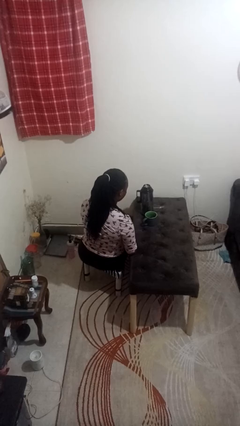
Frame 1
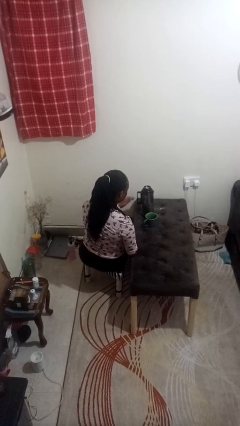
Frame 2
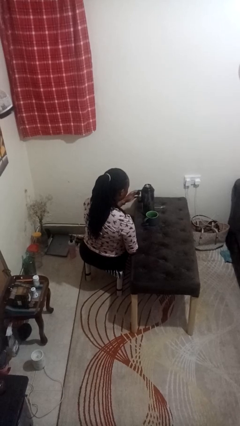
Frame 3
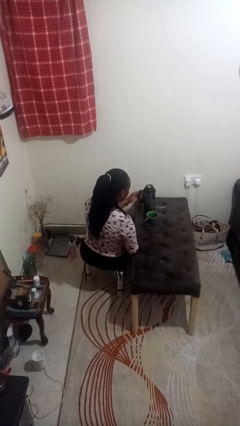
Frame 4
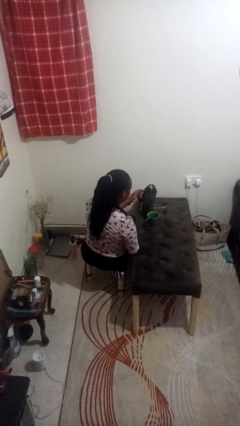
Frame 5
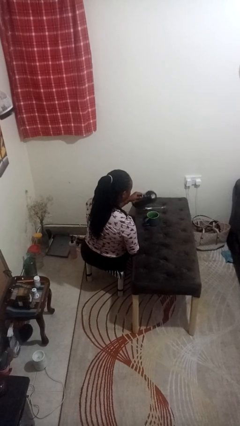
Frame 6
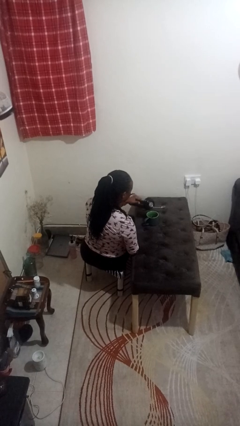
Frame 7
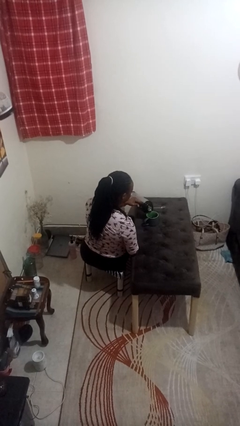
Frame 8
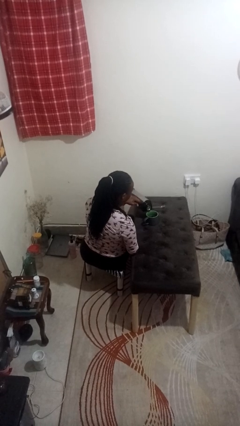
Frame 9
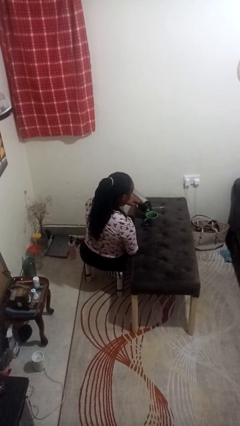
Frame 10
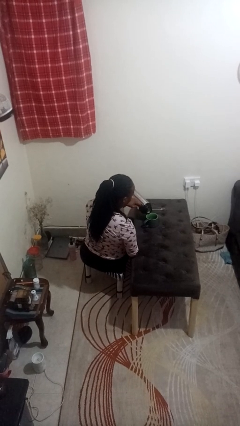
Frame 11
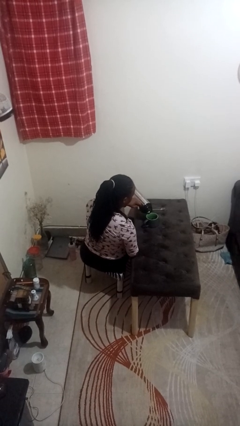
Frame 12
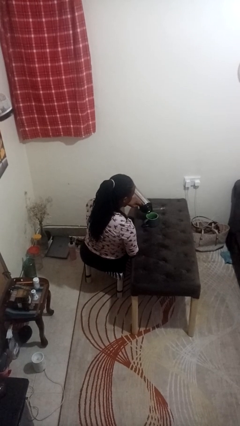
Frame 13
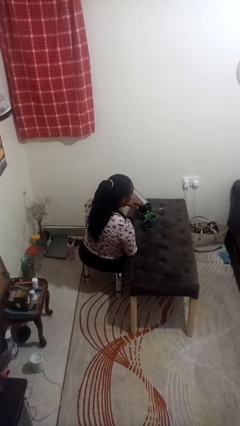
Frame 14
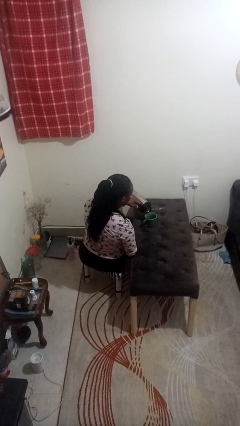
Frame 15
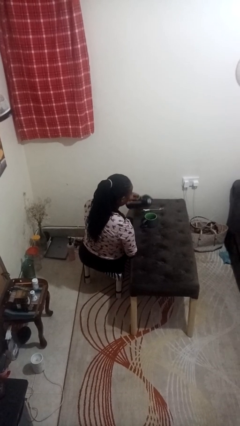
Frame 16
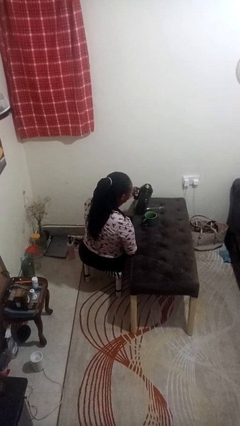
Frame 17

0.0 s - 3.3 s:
person pours coffee into mug

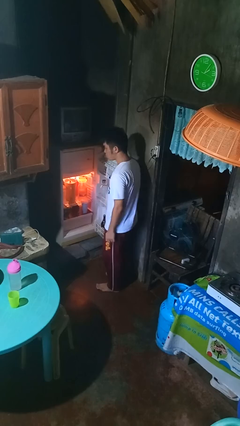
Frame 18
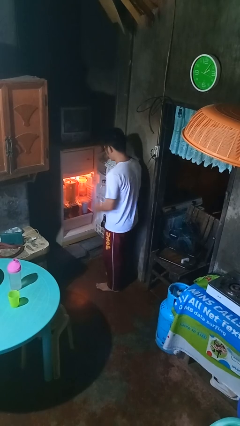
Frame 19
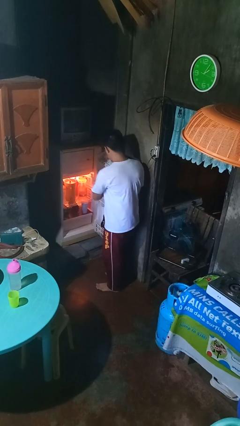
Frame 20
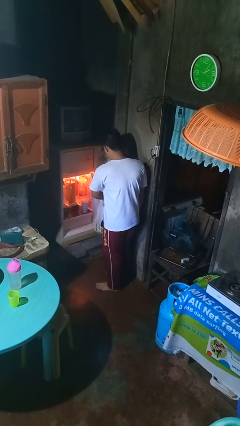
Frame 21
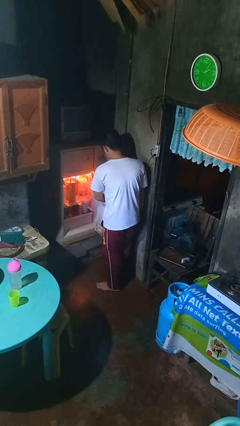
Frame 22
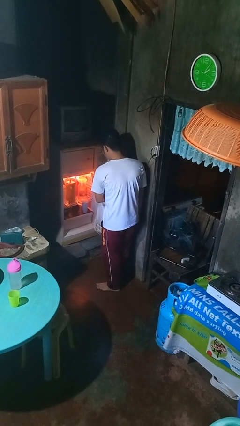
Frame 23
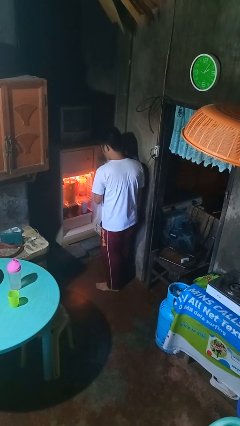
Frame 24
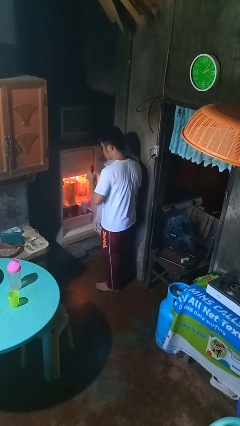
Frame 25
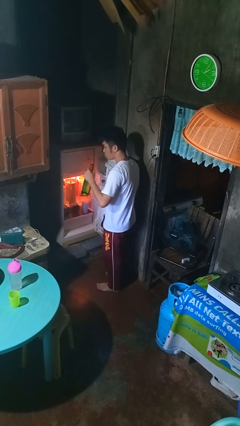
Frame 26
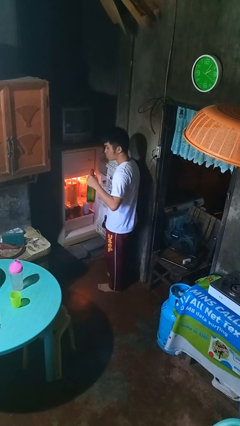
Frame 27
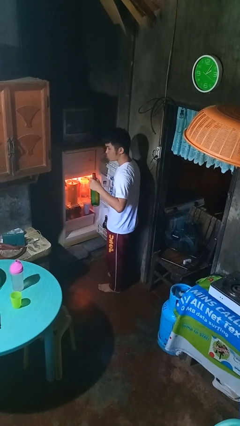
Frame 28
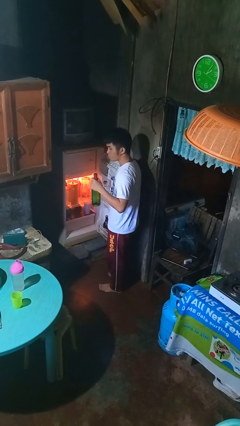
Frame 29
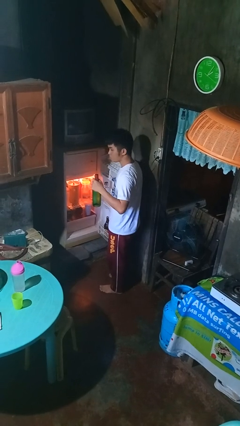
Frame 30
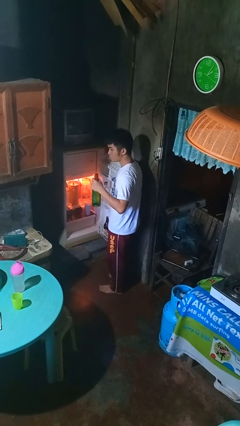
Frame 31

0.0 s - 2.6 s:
person takes object from refrigerator

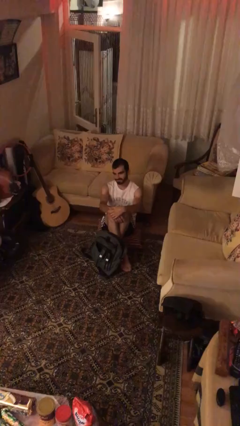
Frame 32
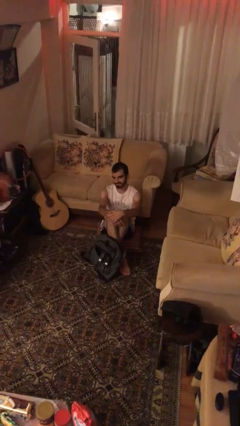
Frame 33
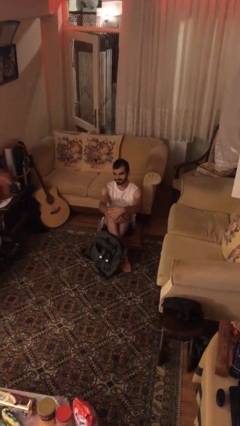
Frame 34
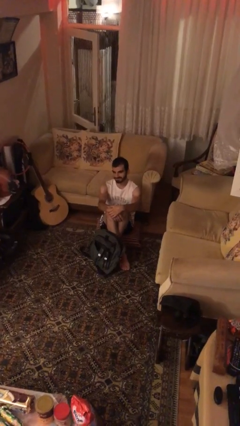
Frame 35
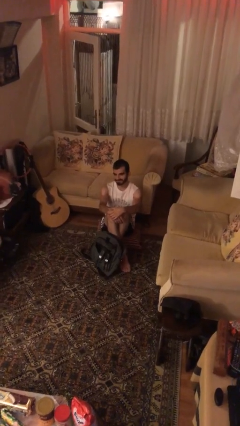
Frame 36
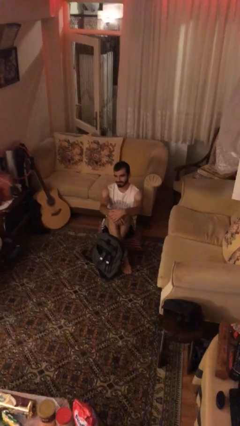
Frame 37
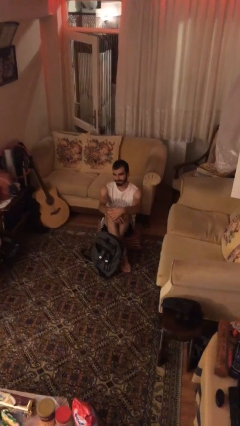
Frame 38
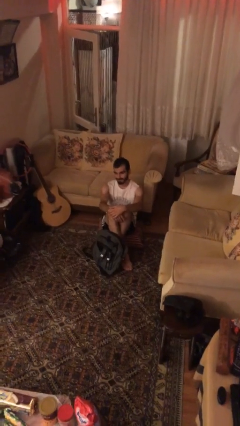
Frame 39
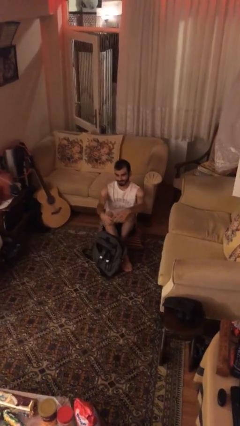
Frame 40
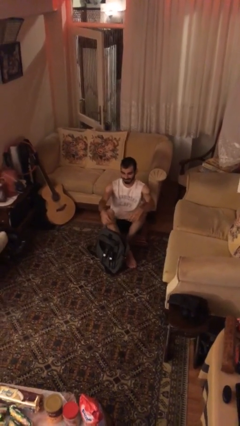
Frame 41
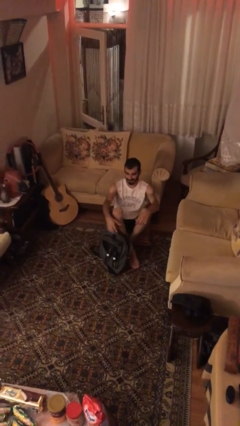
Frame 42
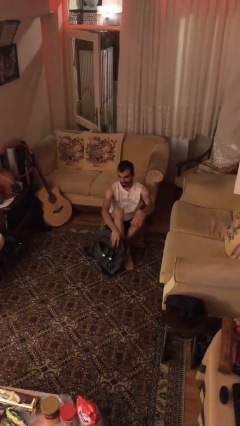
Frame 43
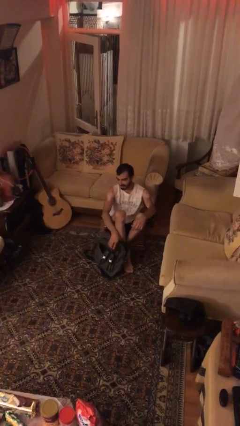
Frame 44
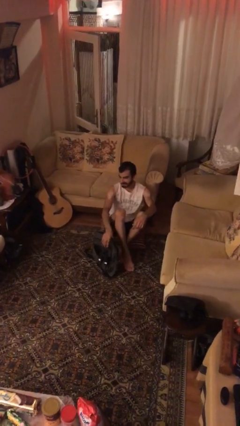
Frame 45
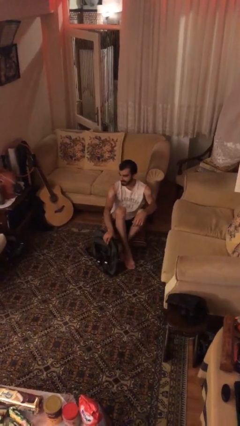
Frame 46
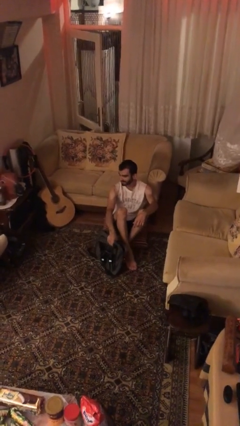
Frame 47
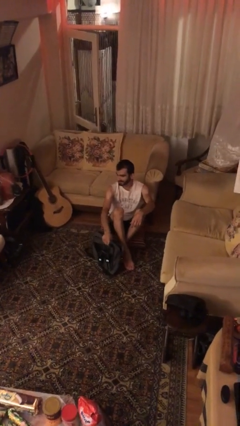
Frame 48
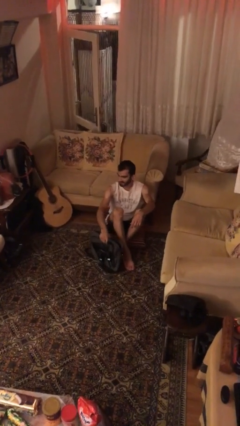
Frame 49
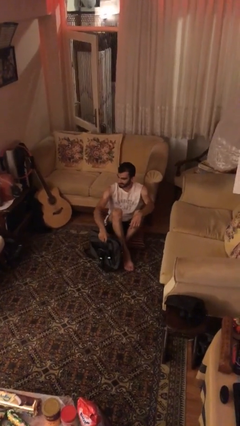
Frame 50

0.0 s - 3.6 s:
person picks up object from floor

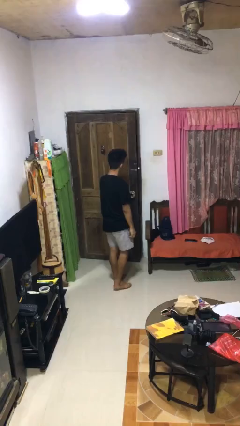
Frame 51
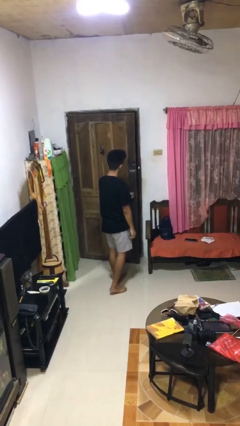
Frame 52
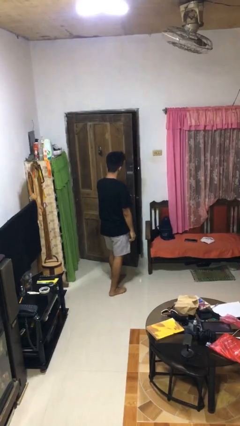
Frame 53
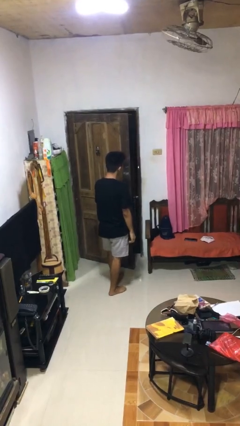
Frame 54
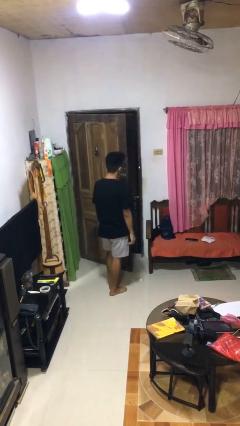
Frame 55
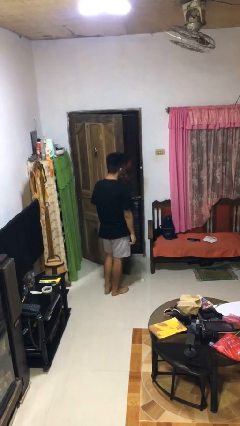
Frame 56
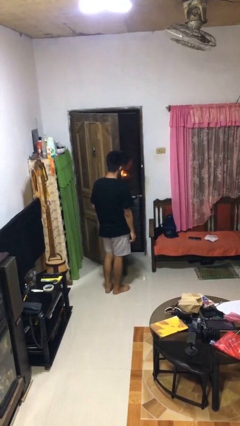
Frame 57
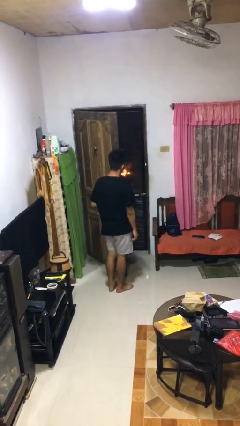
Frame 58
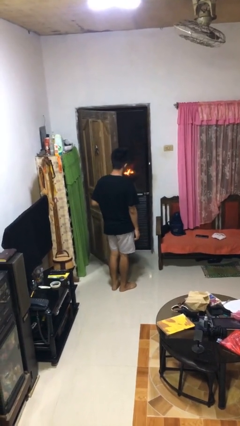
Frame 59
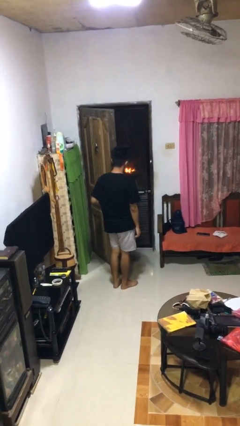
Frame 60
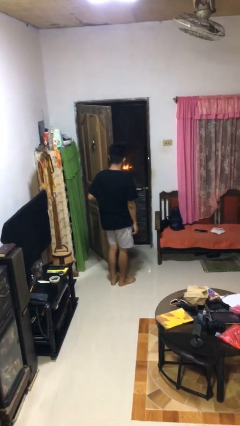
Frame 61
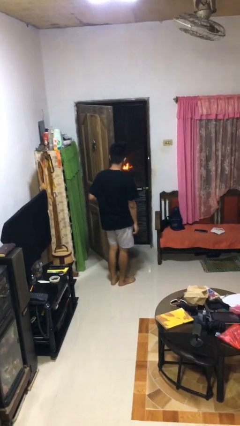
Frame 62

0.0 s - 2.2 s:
person opens facility door

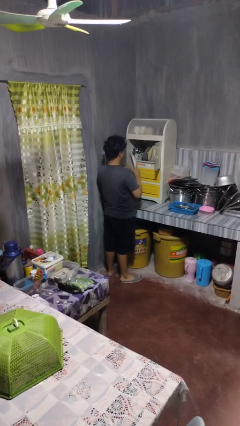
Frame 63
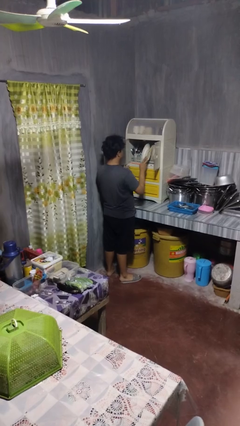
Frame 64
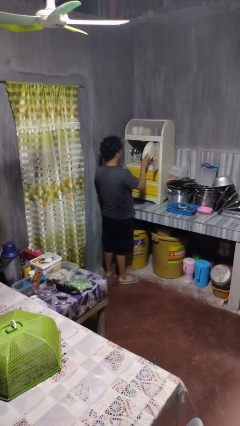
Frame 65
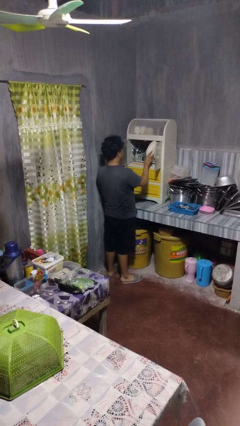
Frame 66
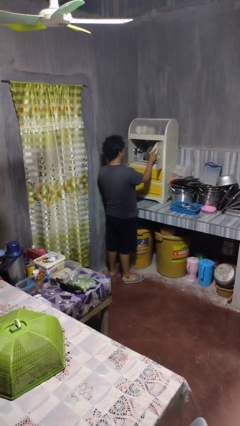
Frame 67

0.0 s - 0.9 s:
person puts down object into cabinet

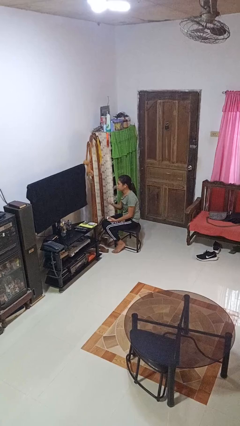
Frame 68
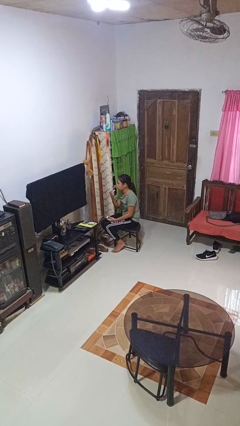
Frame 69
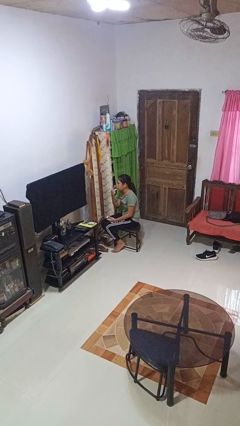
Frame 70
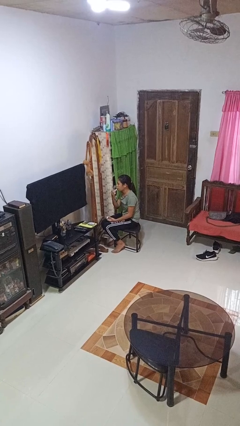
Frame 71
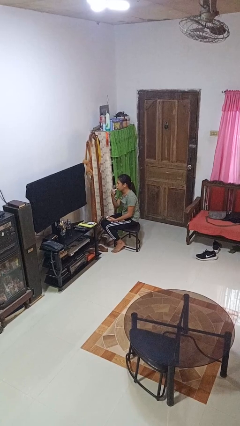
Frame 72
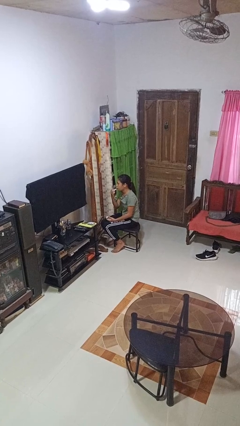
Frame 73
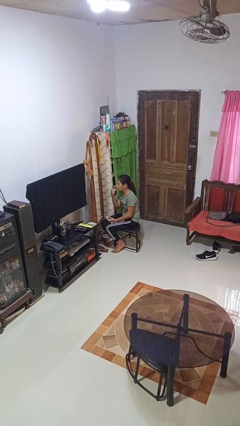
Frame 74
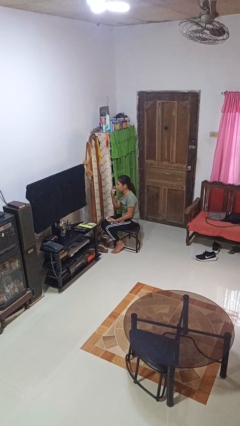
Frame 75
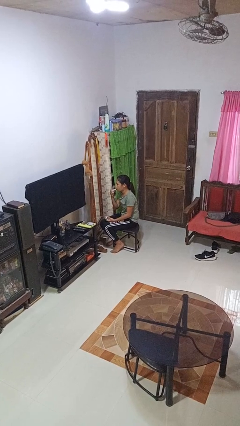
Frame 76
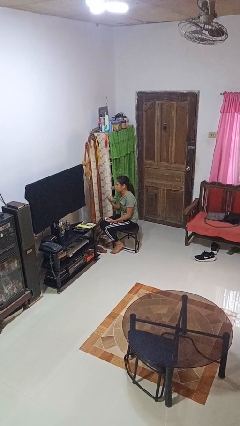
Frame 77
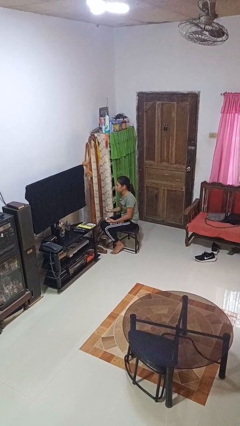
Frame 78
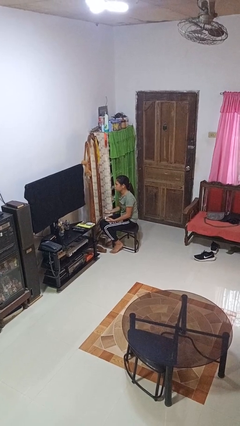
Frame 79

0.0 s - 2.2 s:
person applies lip makeup

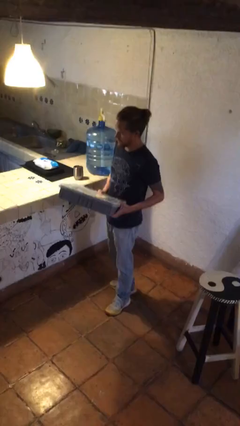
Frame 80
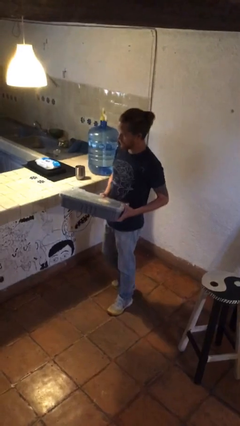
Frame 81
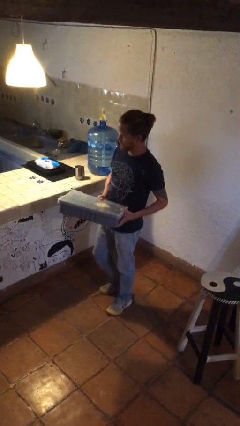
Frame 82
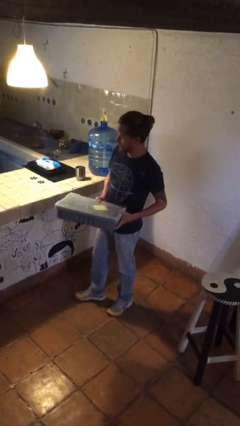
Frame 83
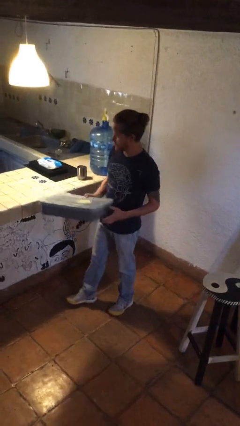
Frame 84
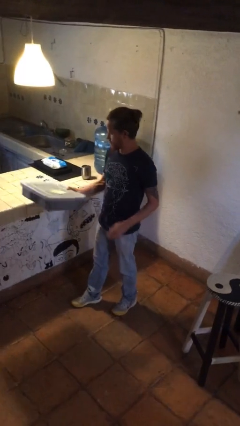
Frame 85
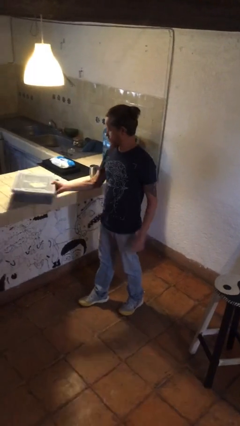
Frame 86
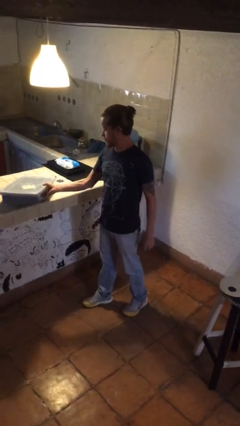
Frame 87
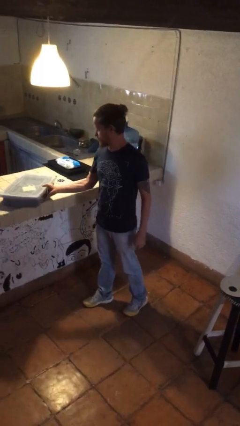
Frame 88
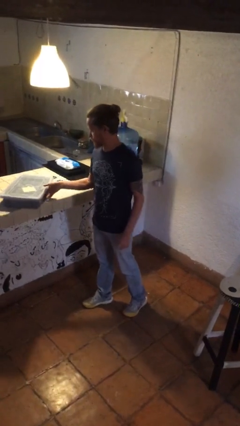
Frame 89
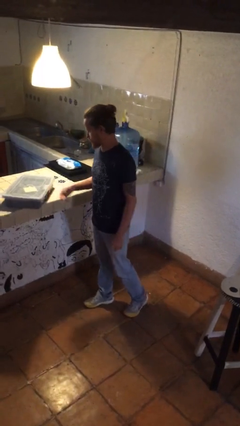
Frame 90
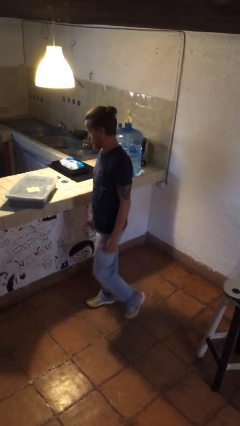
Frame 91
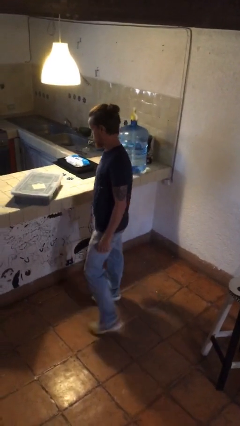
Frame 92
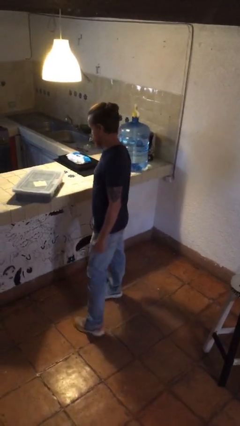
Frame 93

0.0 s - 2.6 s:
person puts down object on countertop
